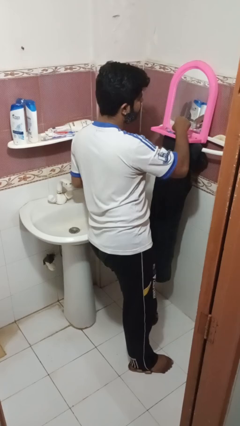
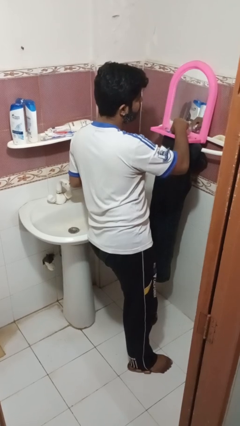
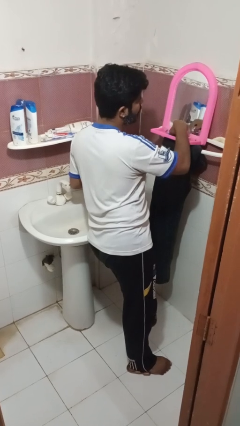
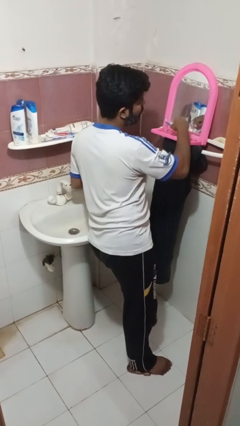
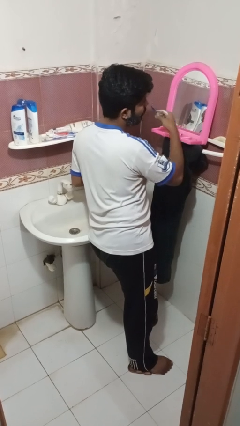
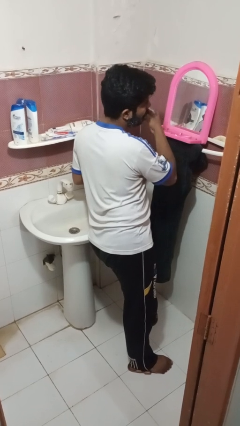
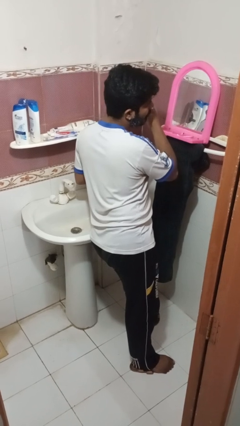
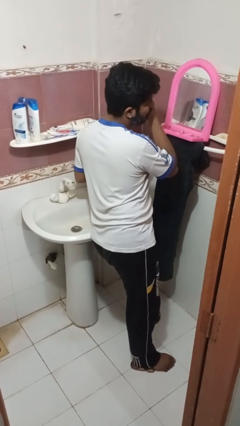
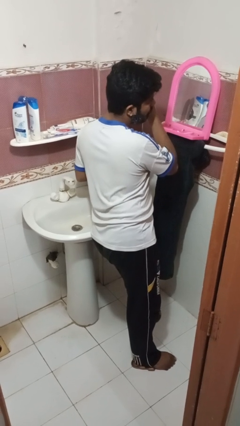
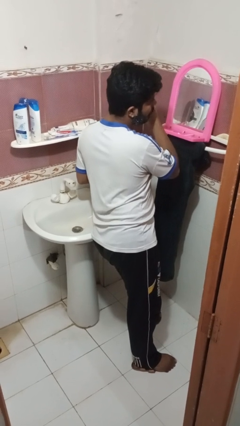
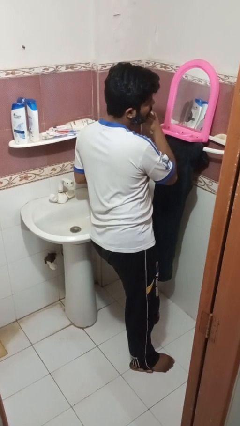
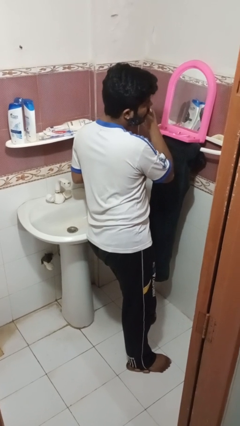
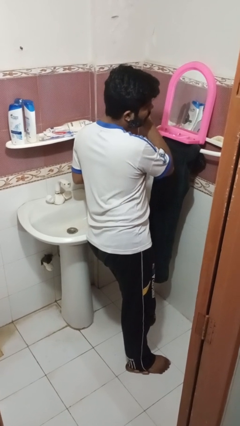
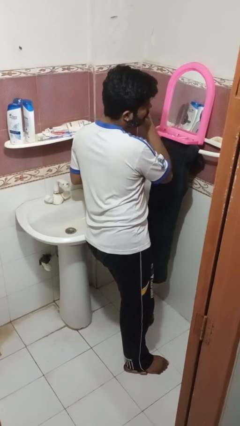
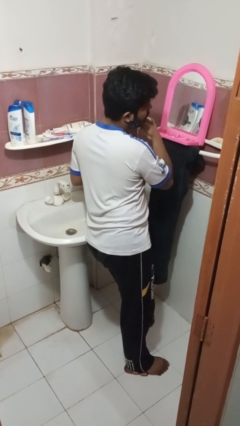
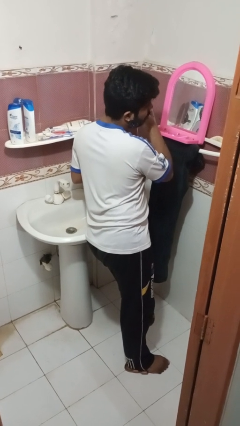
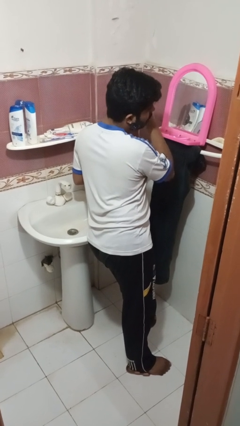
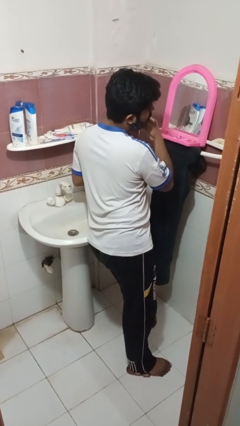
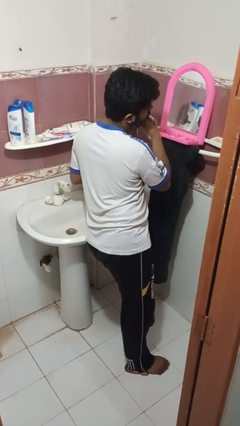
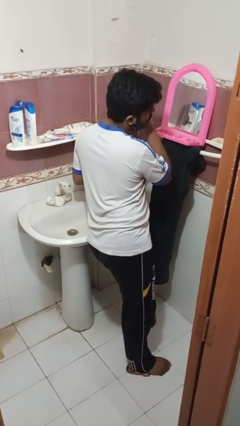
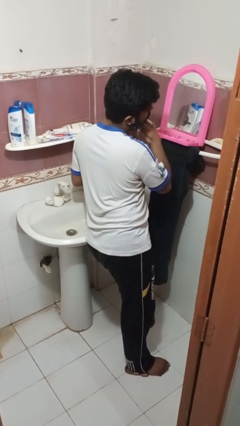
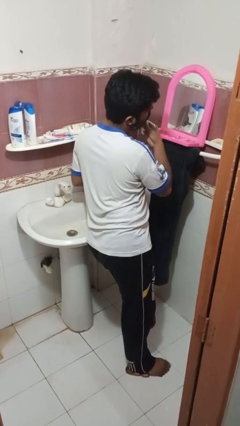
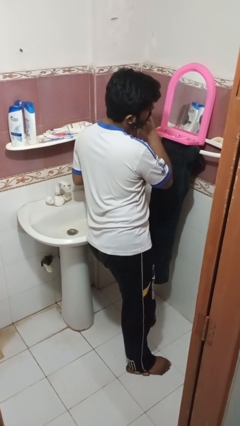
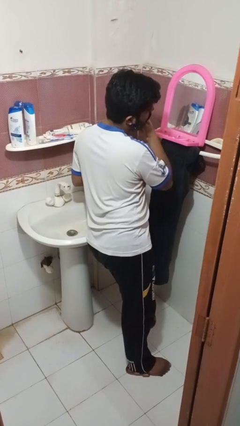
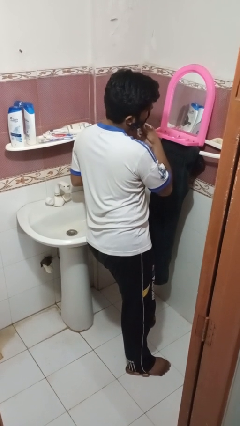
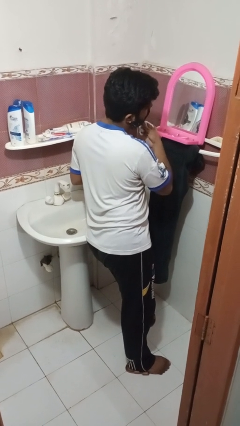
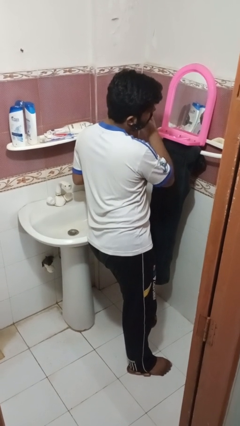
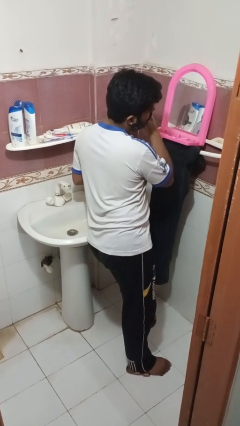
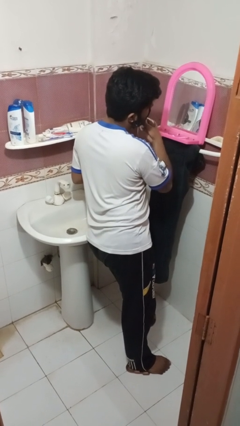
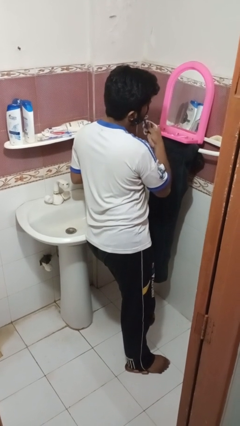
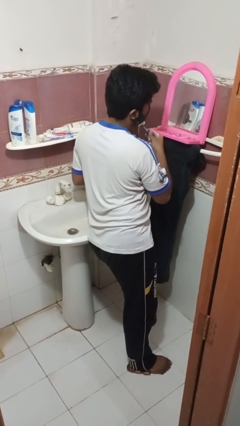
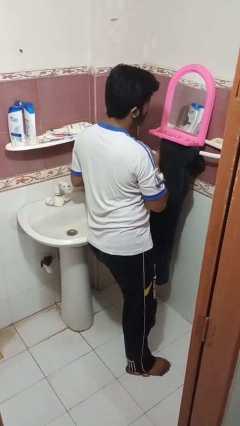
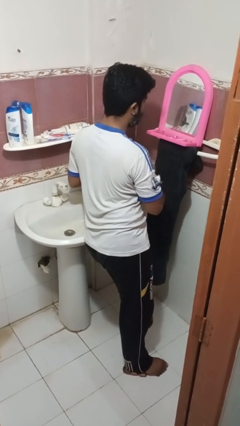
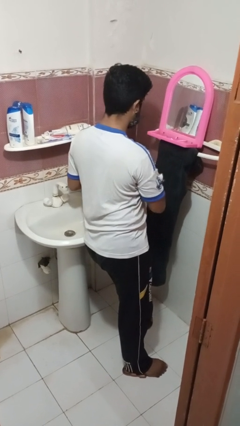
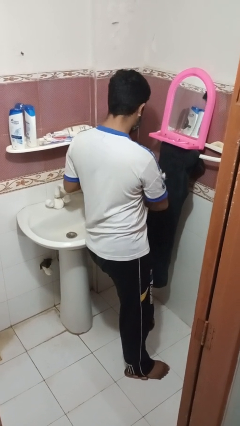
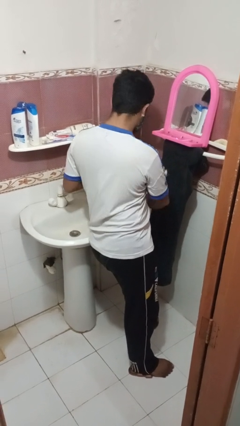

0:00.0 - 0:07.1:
person shaves face

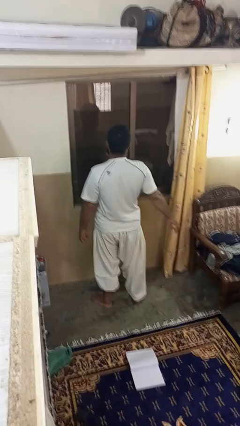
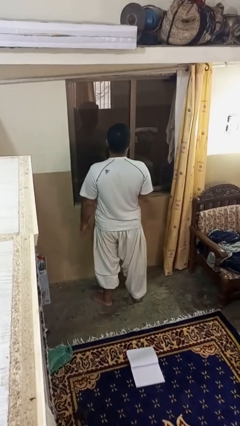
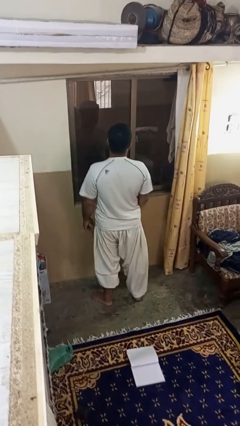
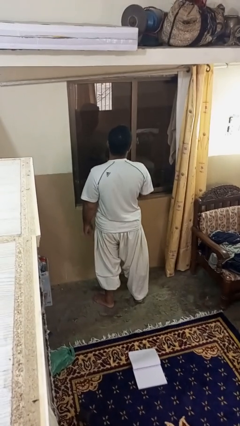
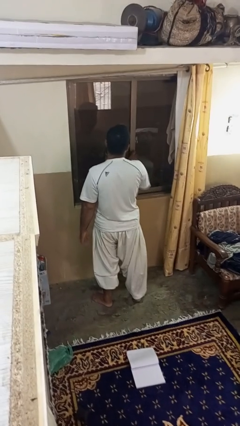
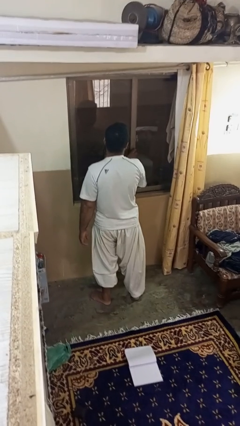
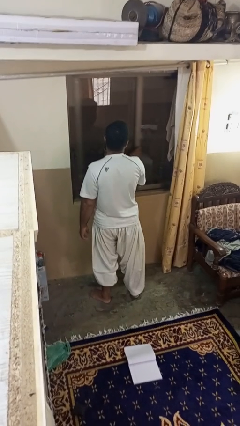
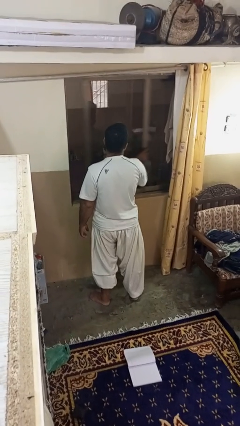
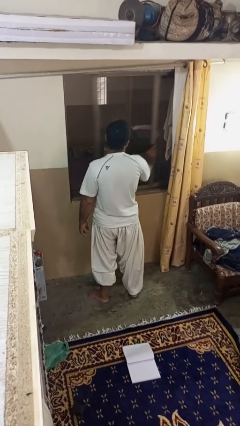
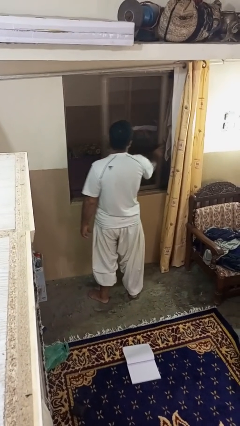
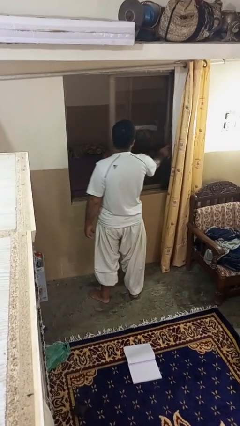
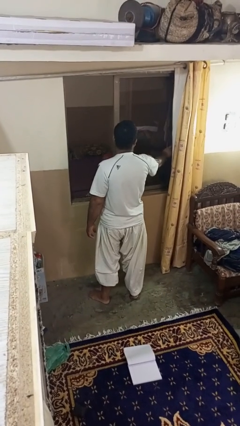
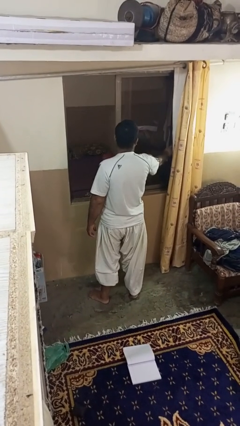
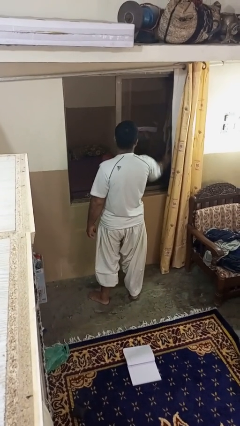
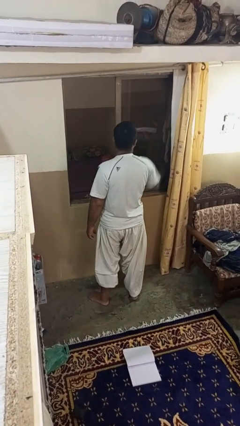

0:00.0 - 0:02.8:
person opens home window

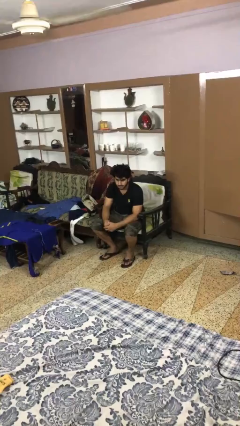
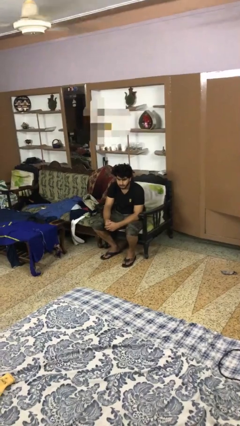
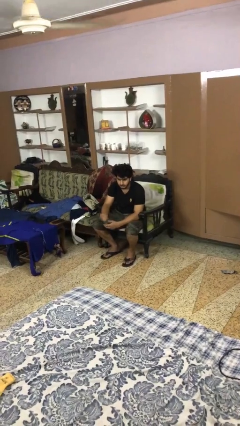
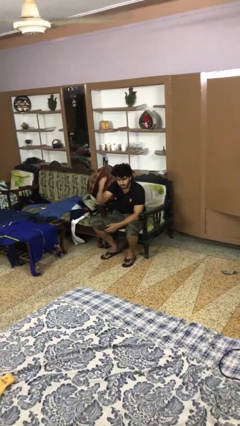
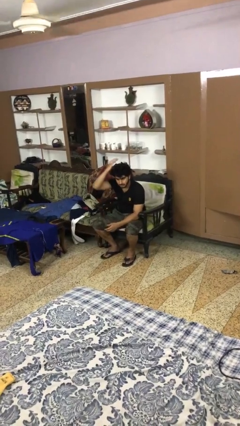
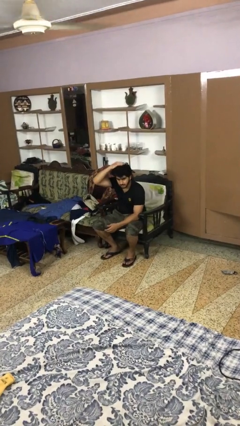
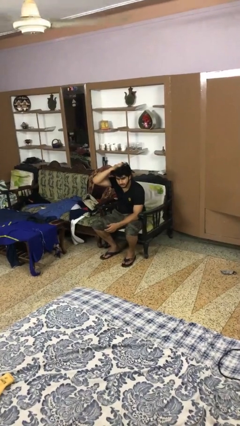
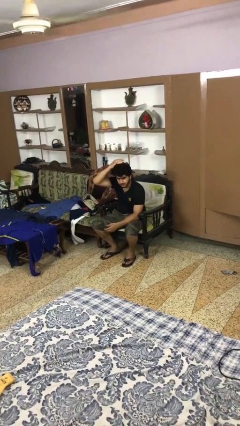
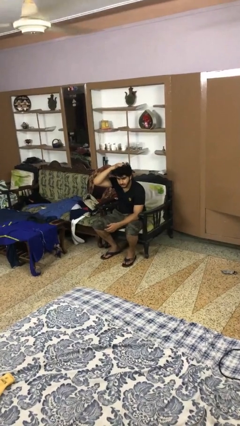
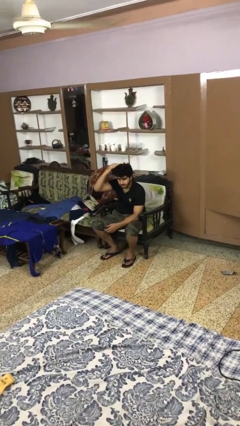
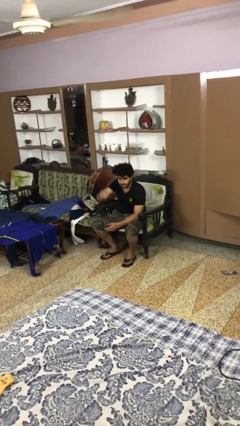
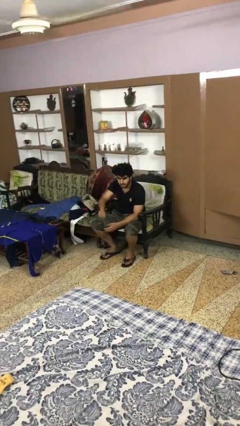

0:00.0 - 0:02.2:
person pats head

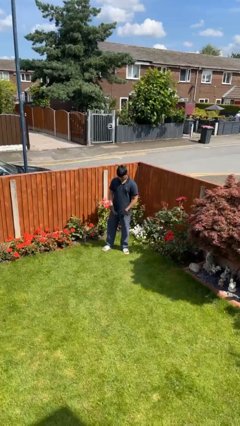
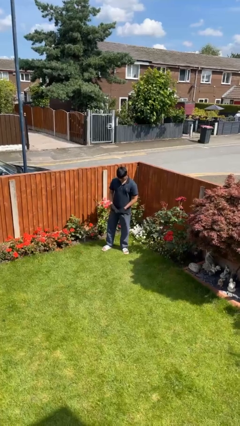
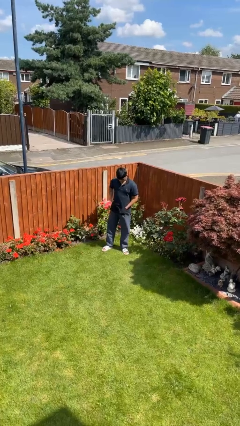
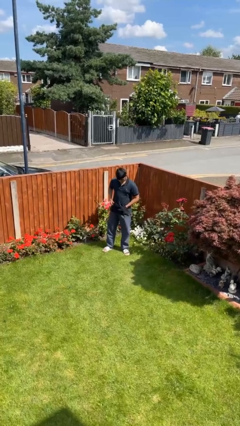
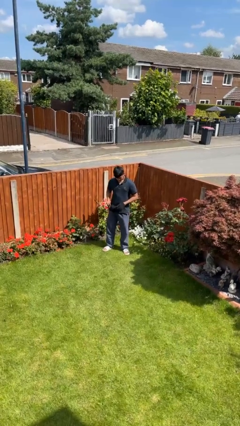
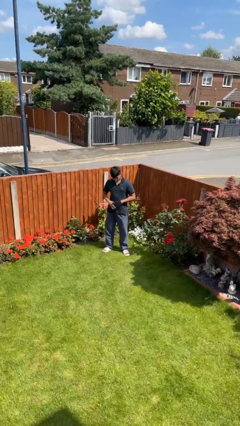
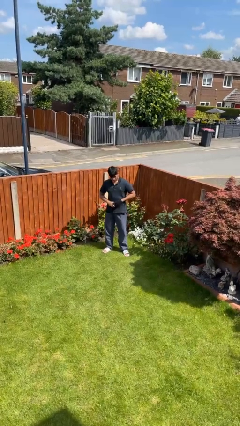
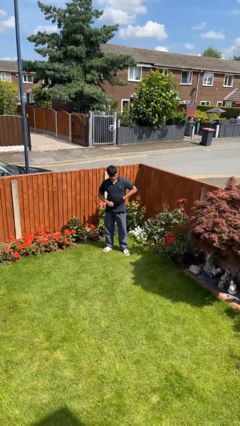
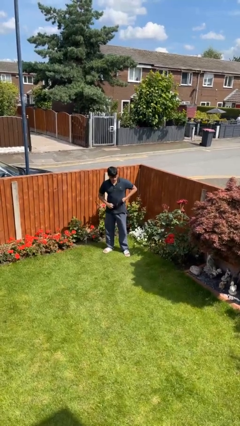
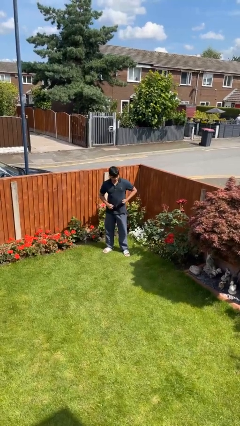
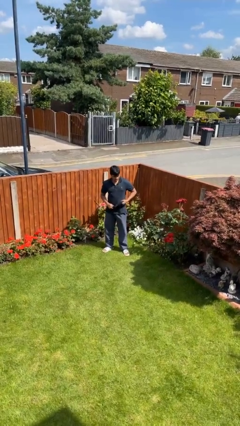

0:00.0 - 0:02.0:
person takes off gloves

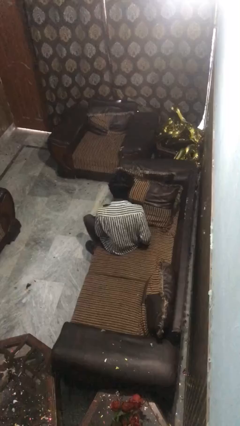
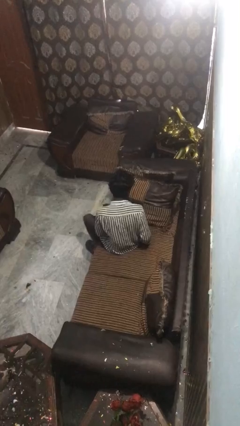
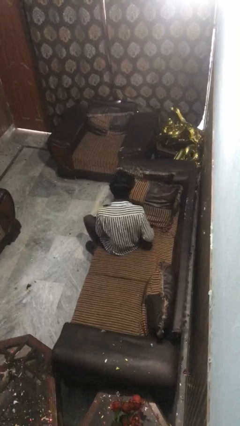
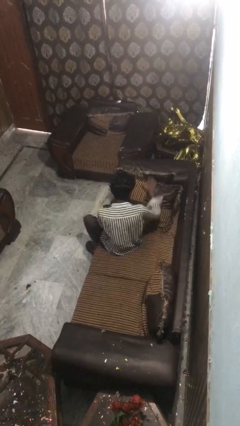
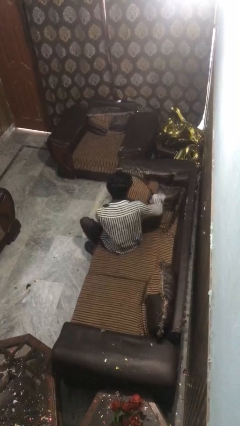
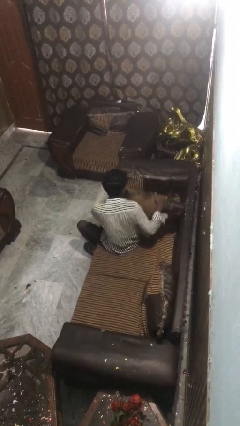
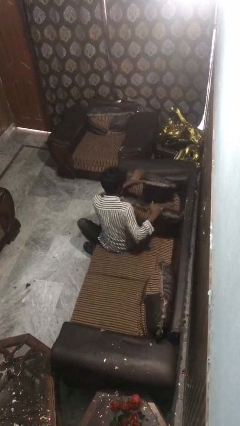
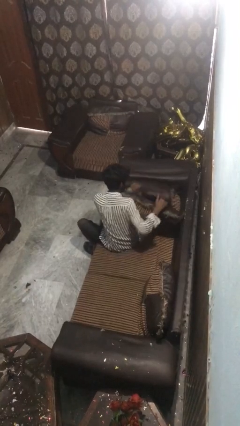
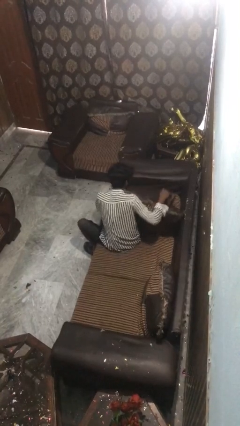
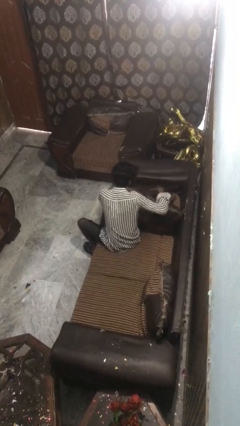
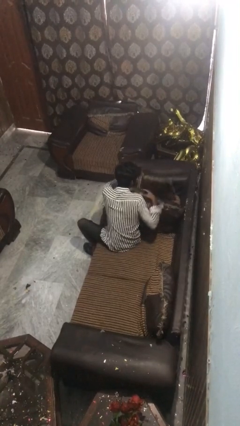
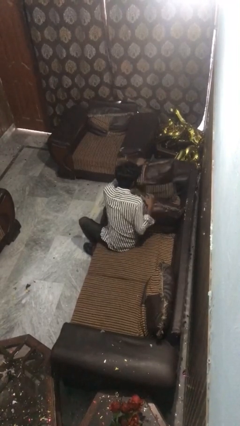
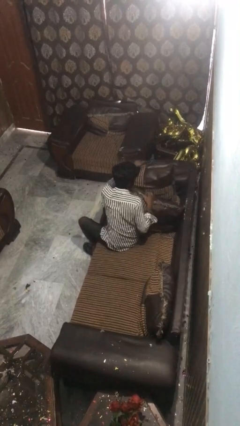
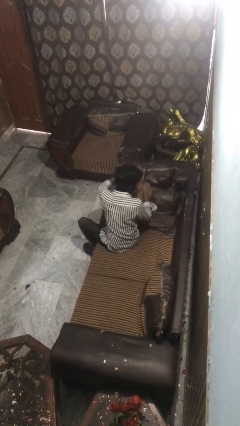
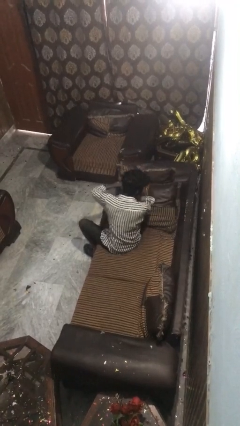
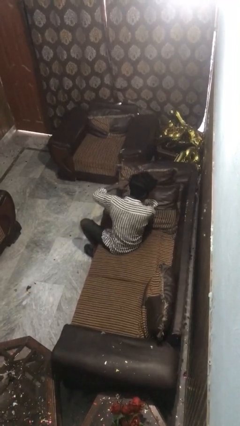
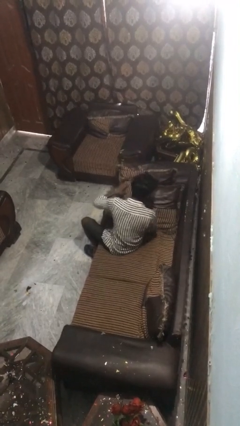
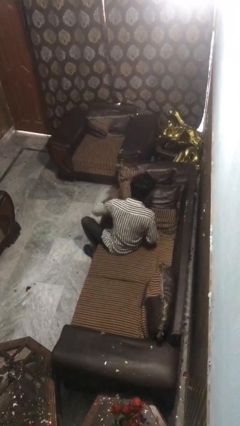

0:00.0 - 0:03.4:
person searches in couch
